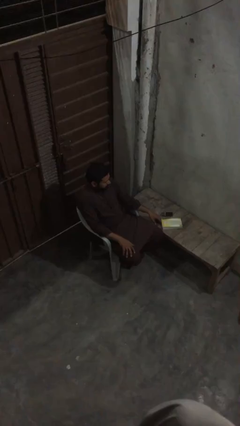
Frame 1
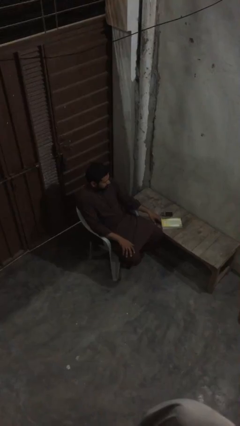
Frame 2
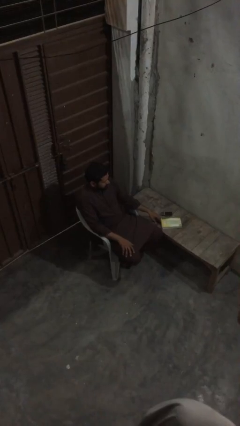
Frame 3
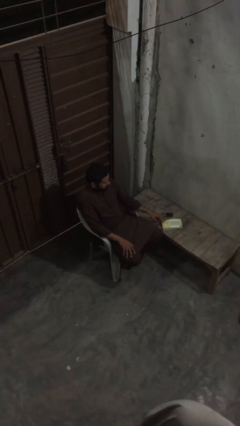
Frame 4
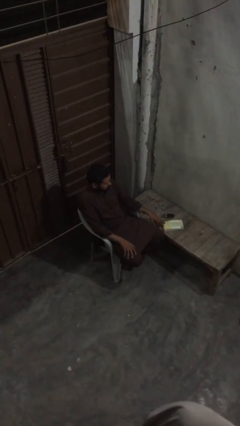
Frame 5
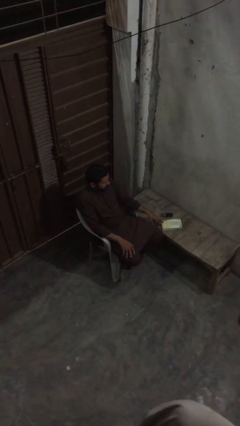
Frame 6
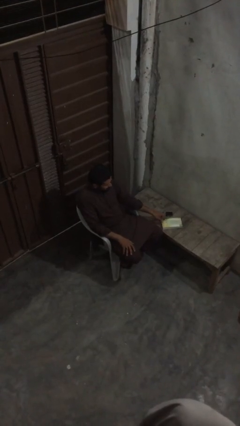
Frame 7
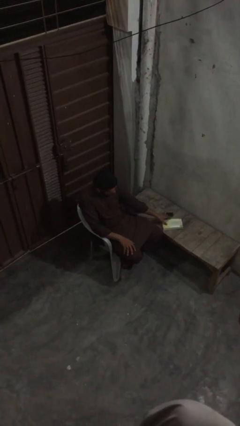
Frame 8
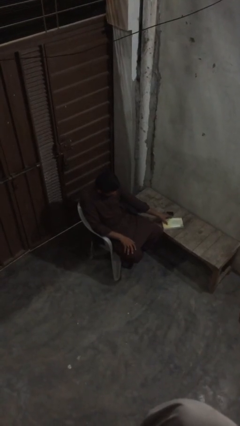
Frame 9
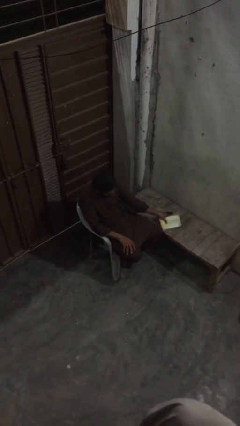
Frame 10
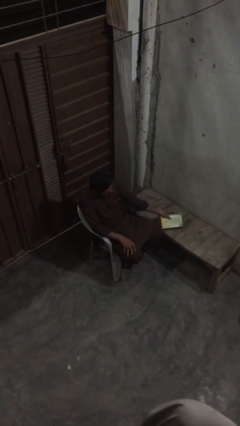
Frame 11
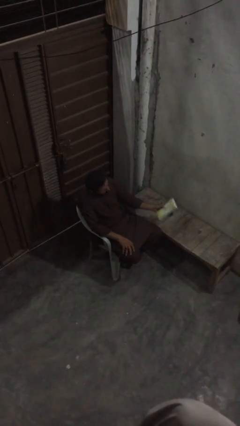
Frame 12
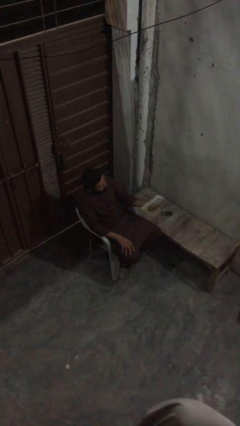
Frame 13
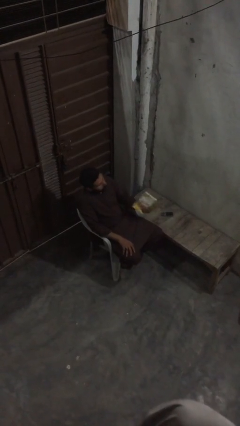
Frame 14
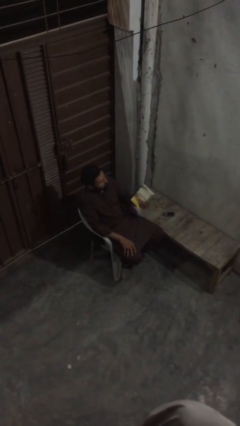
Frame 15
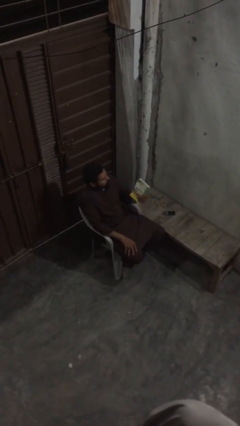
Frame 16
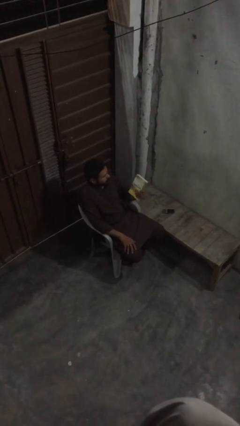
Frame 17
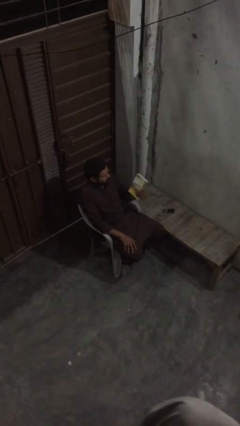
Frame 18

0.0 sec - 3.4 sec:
person picks up object from table

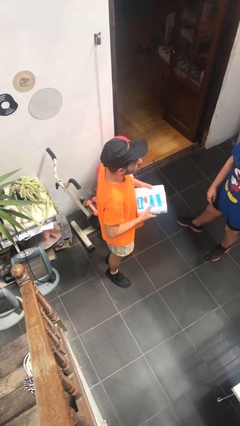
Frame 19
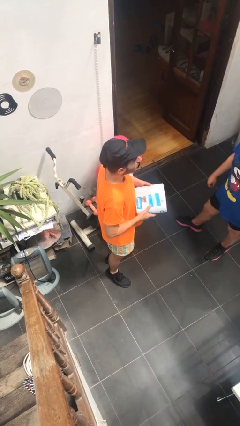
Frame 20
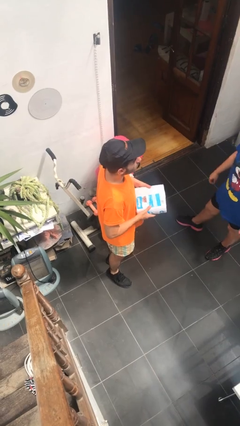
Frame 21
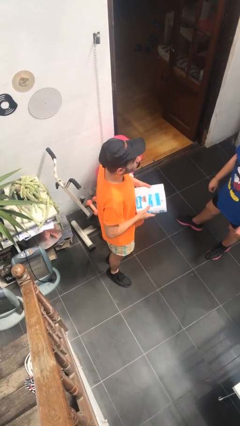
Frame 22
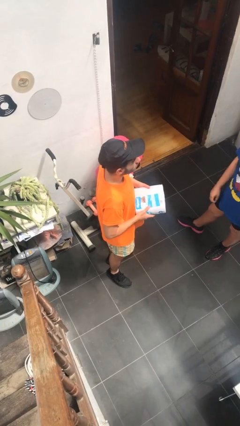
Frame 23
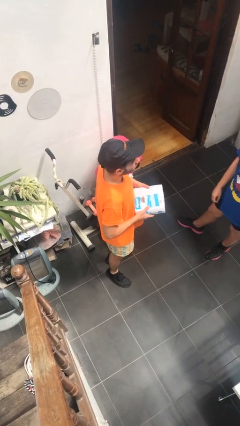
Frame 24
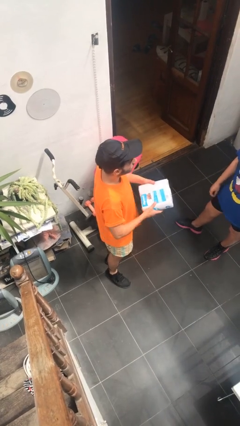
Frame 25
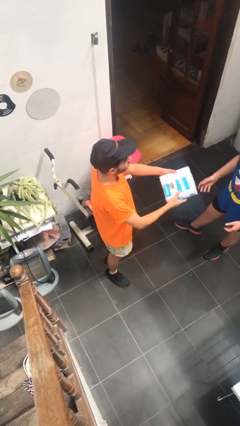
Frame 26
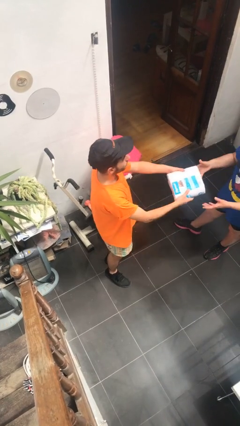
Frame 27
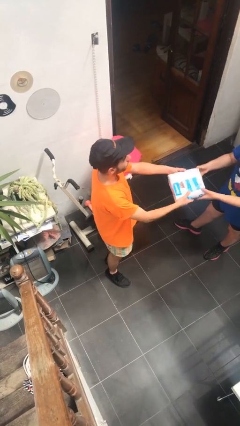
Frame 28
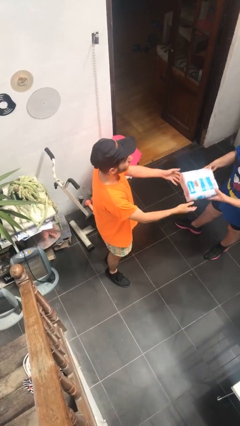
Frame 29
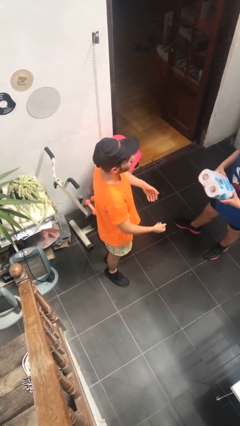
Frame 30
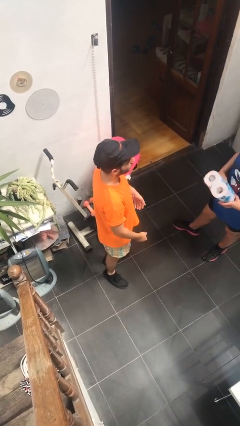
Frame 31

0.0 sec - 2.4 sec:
person transfers object to person

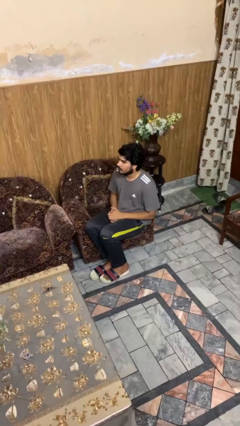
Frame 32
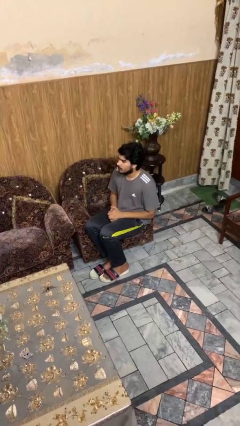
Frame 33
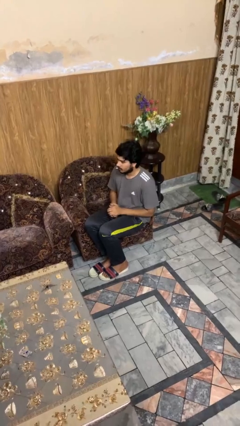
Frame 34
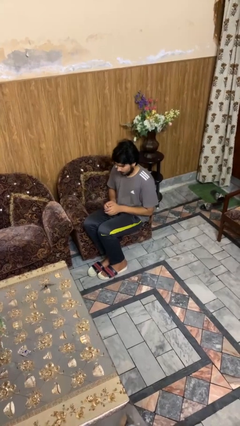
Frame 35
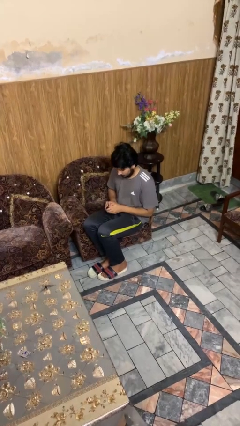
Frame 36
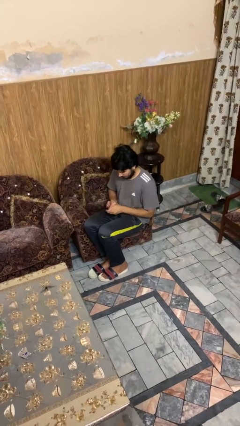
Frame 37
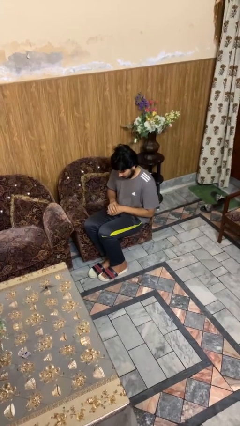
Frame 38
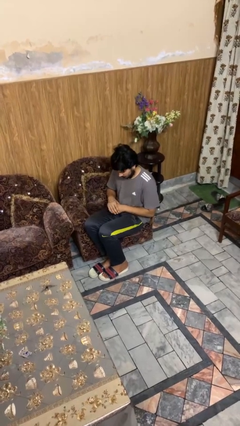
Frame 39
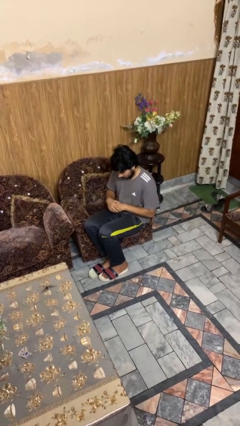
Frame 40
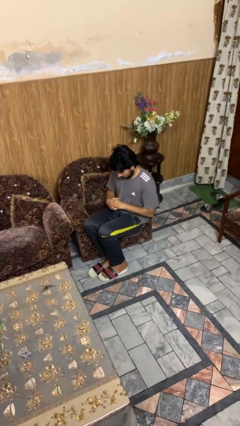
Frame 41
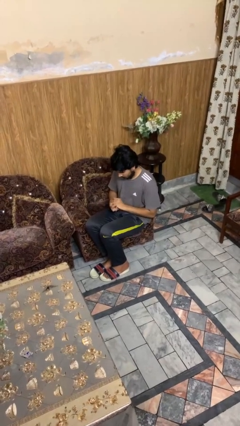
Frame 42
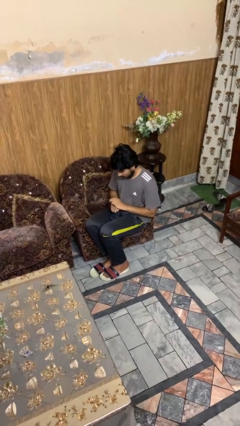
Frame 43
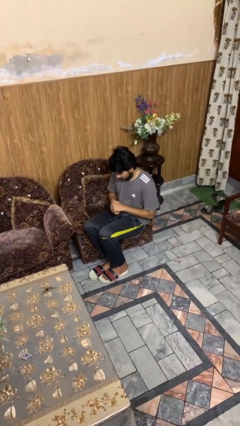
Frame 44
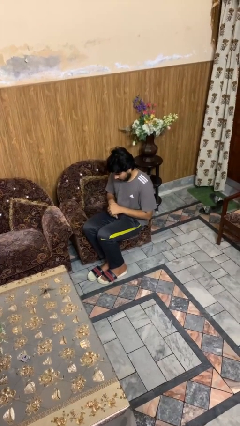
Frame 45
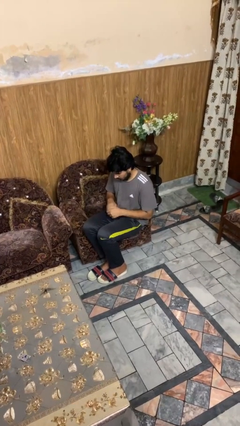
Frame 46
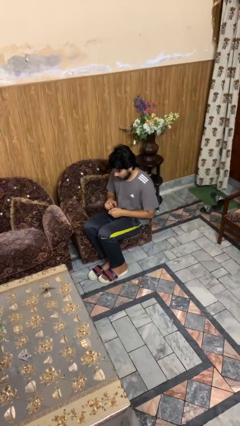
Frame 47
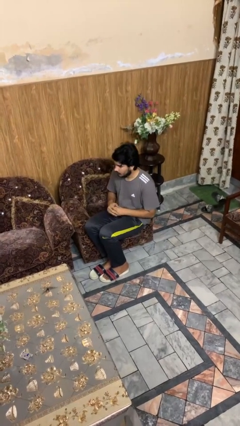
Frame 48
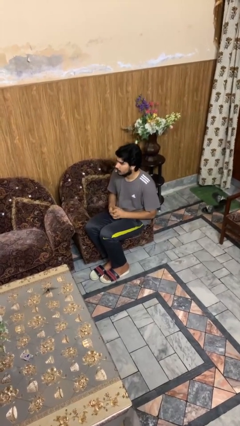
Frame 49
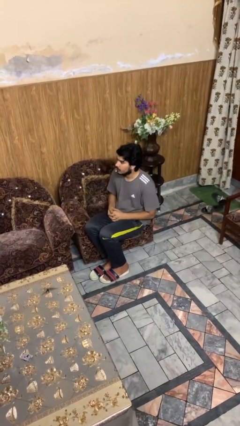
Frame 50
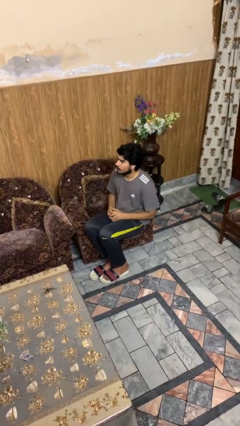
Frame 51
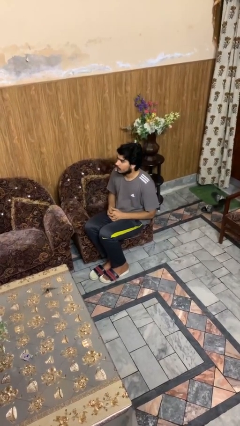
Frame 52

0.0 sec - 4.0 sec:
person looks at hands in lap

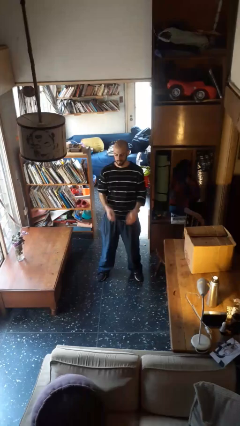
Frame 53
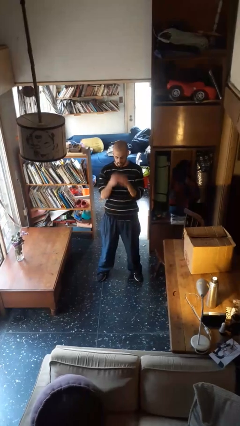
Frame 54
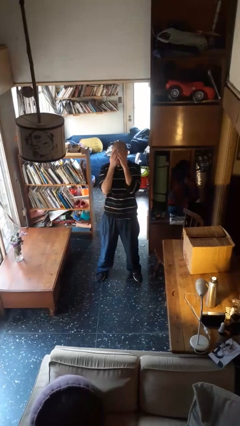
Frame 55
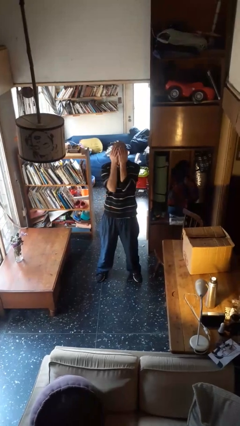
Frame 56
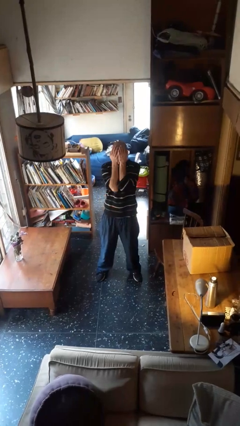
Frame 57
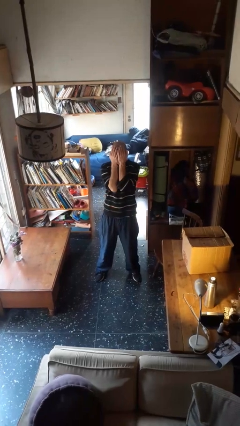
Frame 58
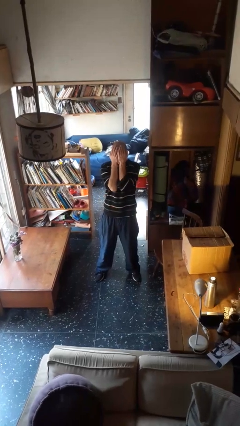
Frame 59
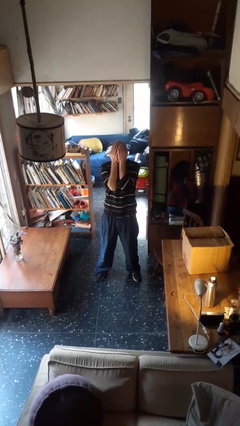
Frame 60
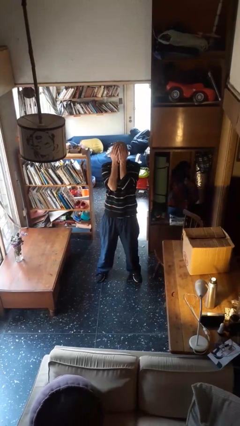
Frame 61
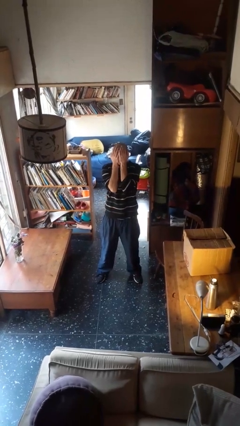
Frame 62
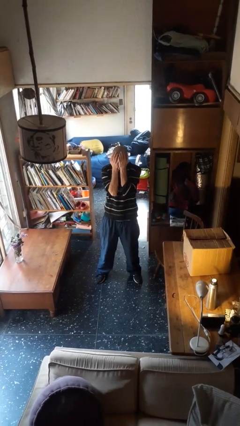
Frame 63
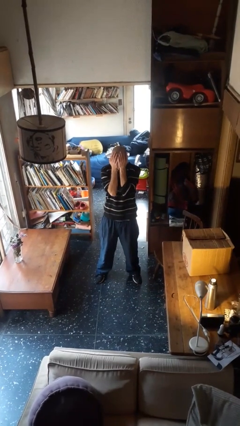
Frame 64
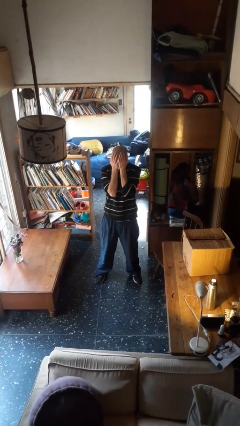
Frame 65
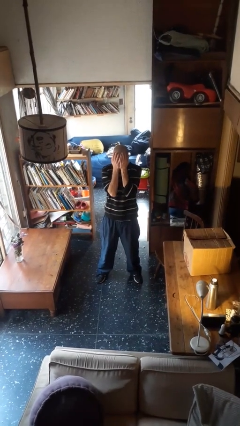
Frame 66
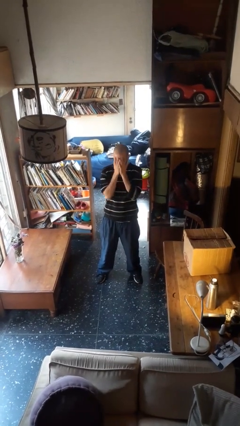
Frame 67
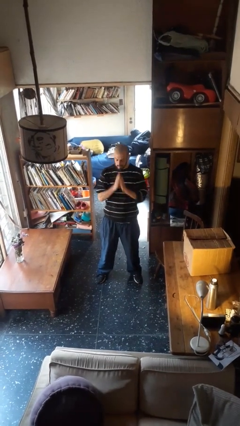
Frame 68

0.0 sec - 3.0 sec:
person covers face with hands

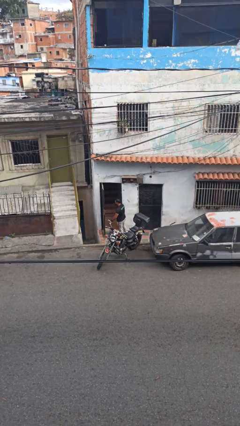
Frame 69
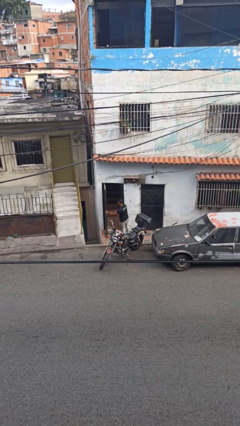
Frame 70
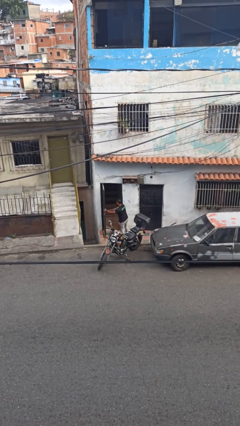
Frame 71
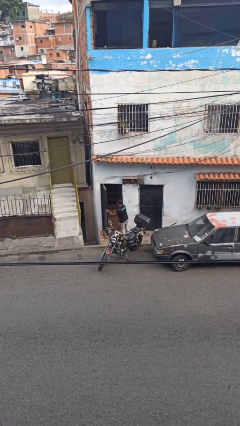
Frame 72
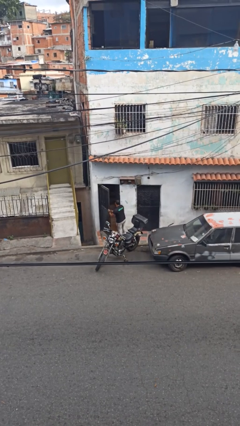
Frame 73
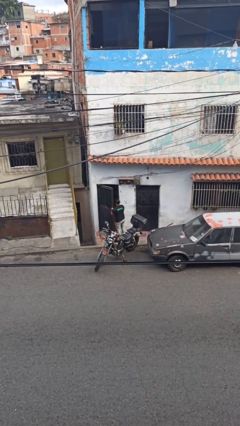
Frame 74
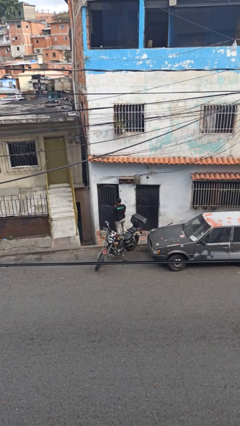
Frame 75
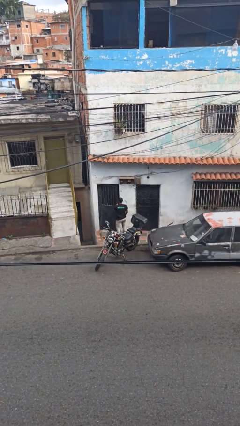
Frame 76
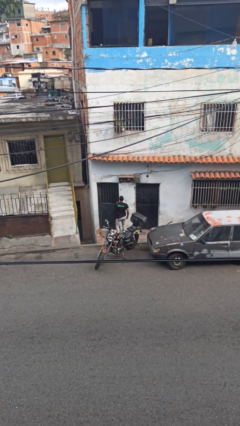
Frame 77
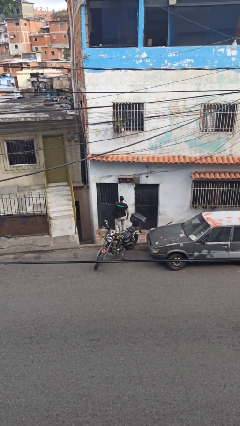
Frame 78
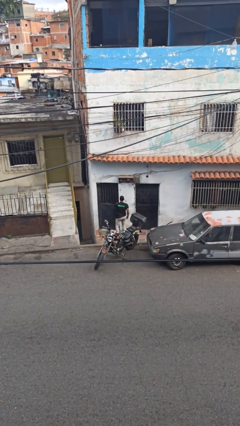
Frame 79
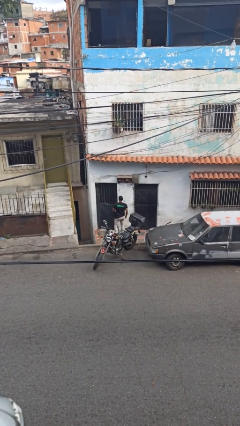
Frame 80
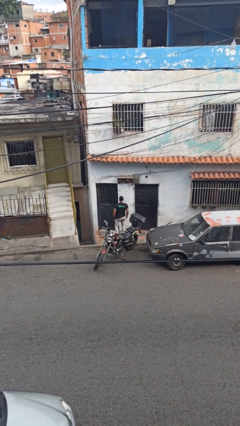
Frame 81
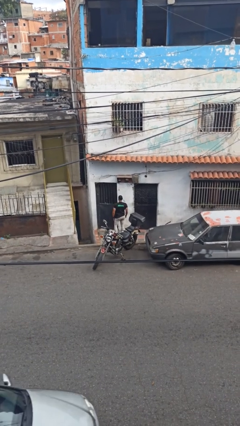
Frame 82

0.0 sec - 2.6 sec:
person closes facility door

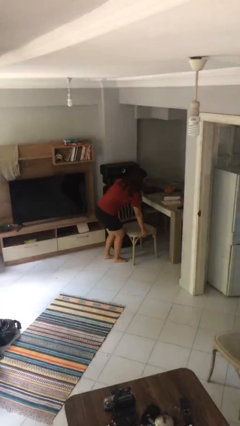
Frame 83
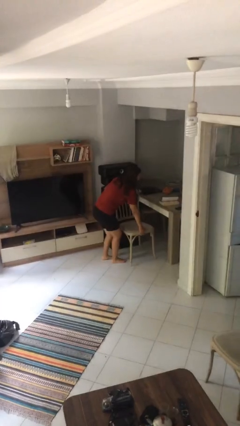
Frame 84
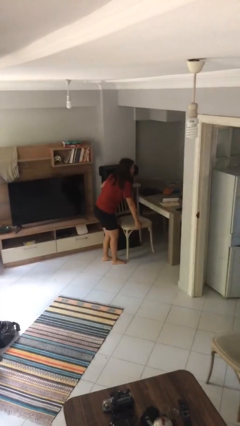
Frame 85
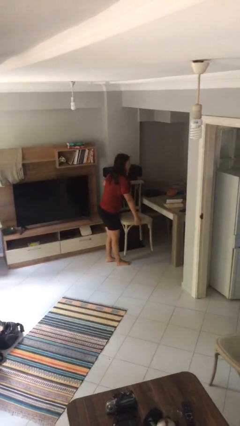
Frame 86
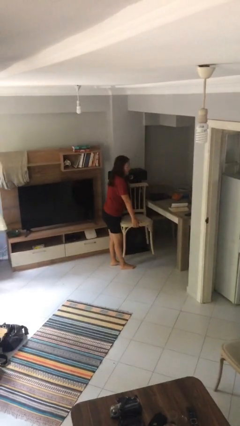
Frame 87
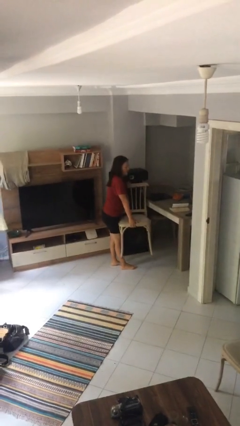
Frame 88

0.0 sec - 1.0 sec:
person picks up object from floor

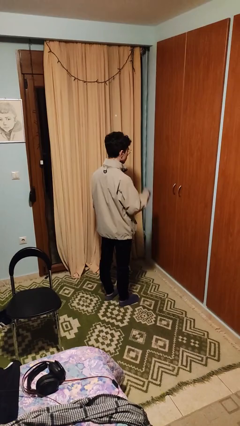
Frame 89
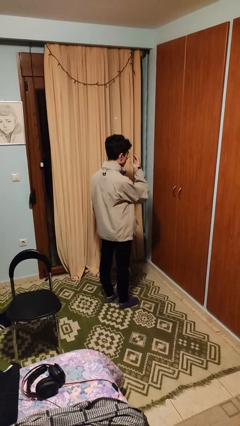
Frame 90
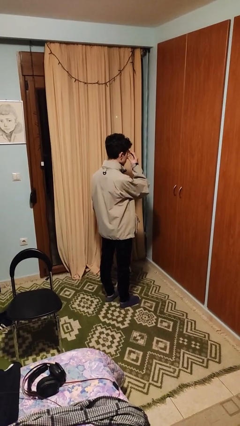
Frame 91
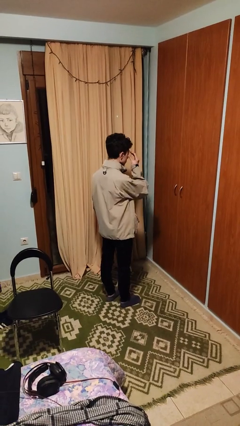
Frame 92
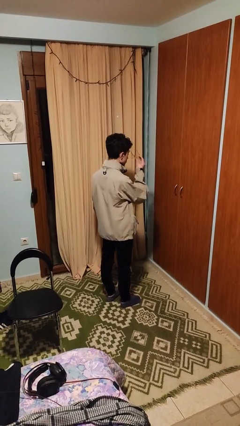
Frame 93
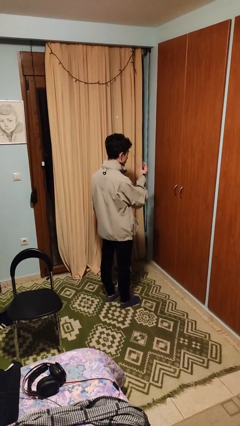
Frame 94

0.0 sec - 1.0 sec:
person takes off glasses
